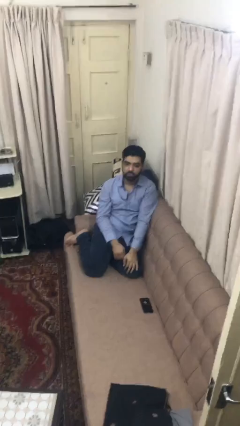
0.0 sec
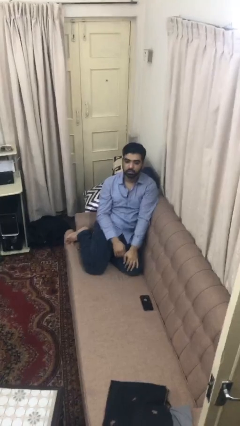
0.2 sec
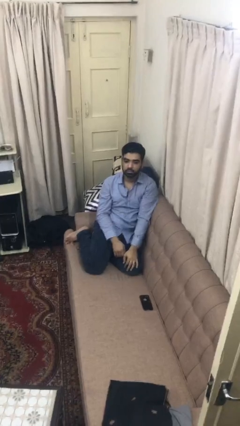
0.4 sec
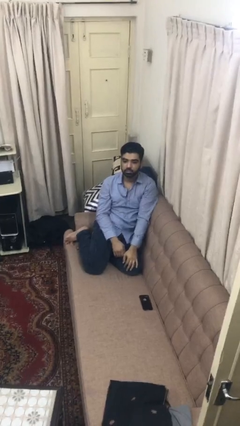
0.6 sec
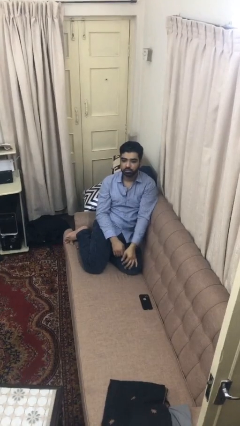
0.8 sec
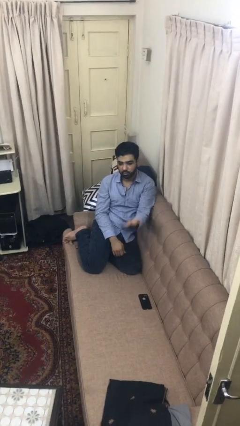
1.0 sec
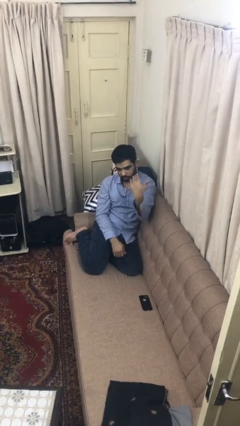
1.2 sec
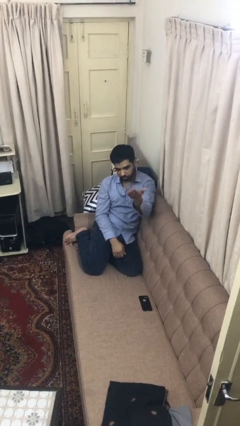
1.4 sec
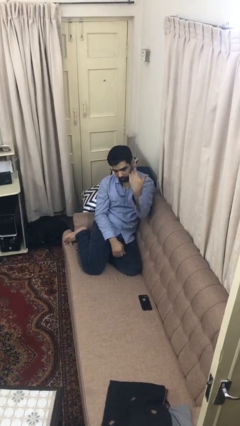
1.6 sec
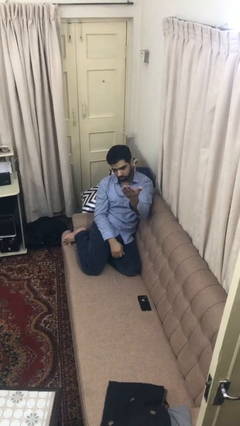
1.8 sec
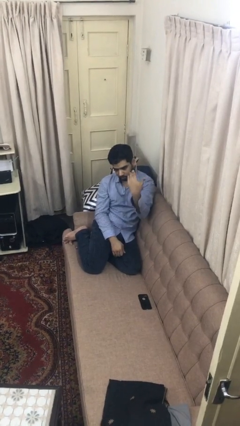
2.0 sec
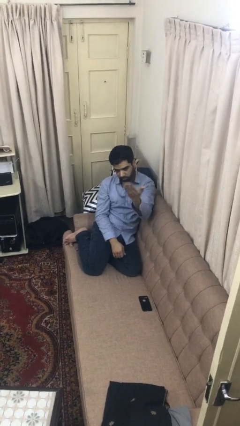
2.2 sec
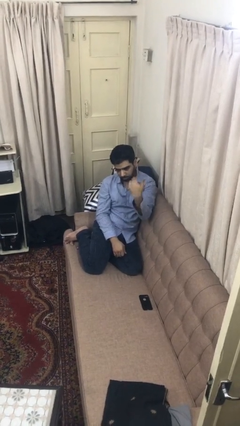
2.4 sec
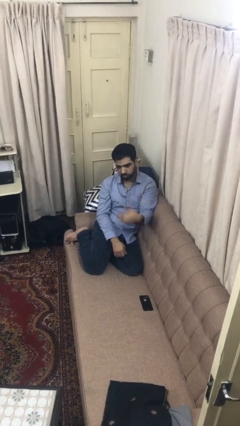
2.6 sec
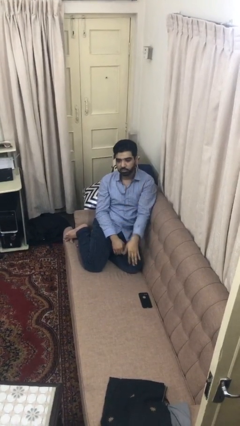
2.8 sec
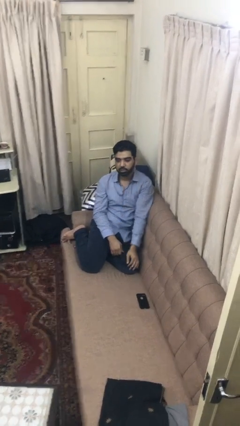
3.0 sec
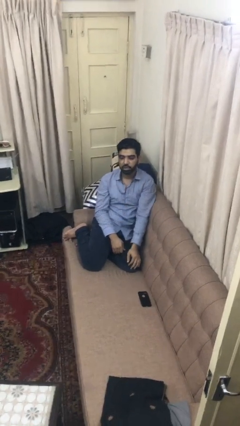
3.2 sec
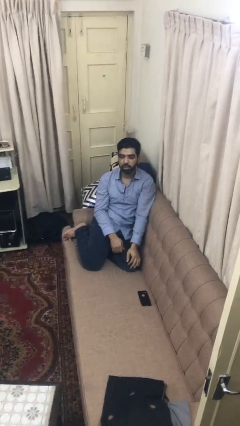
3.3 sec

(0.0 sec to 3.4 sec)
person gestures come here

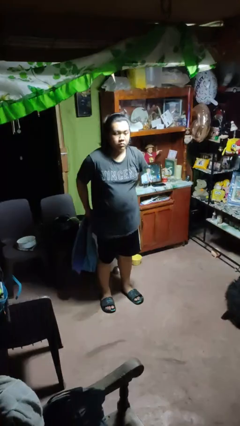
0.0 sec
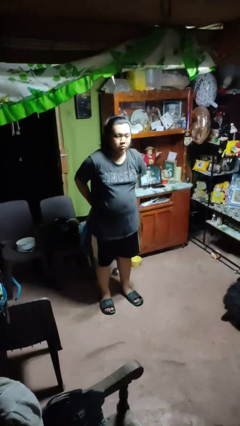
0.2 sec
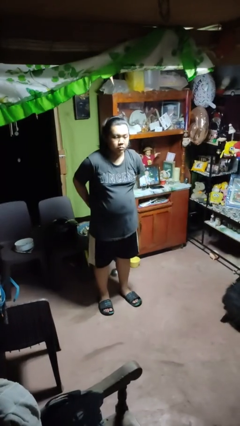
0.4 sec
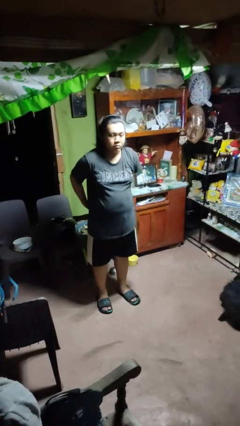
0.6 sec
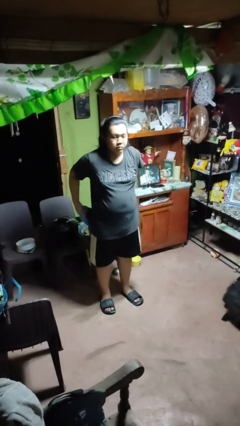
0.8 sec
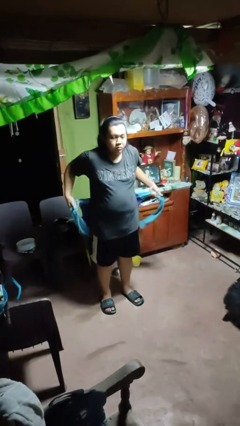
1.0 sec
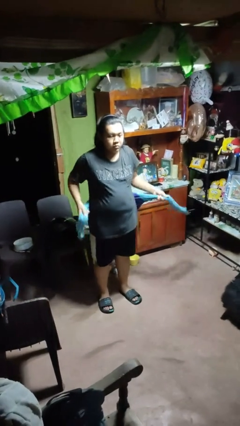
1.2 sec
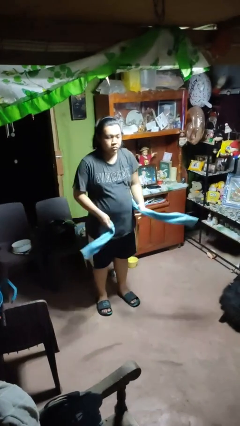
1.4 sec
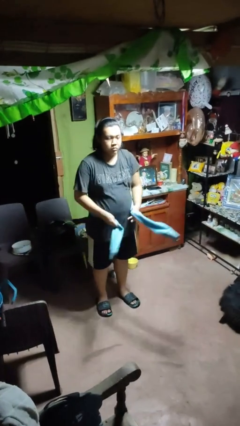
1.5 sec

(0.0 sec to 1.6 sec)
person ties jacket around waist

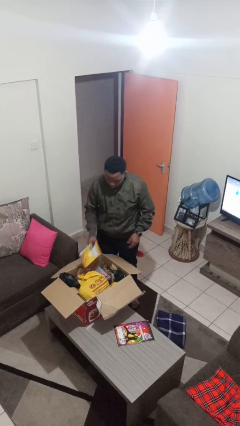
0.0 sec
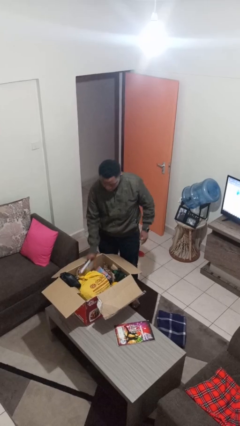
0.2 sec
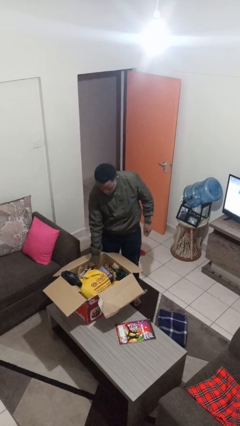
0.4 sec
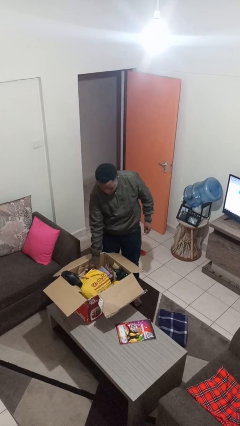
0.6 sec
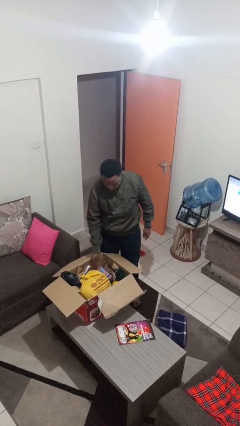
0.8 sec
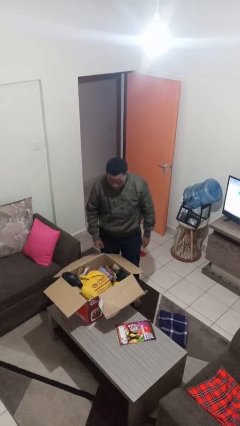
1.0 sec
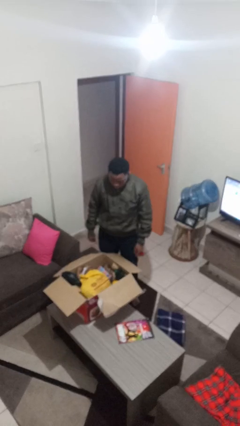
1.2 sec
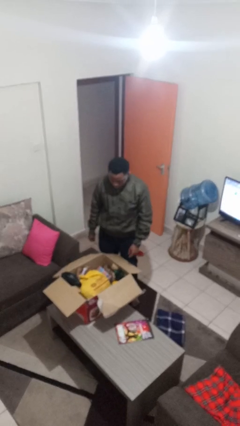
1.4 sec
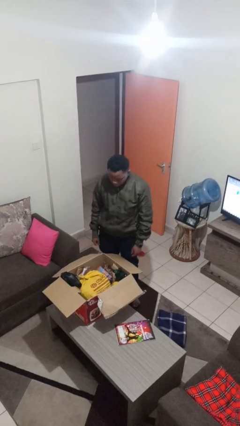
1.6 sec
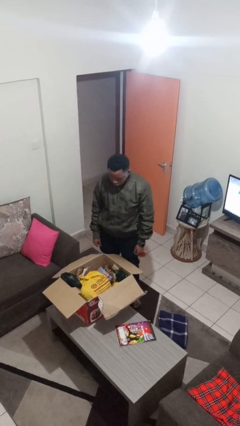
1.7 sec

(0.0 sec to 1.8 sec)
person puts object into box

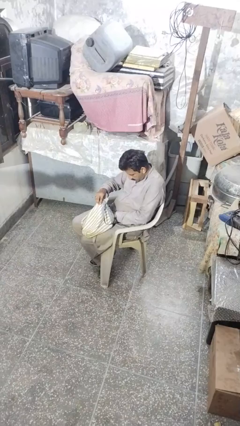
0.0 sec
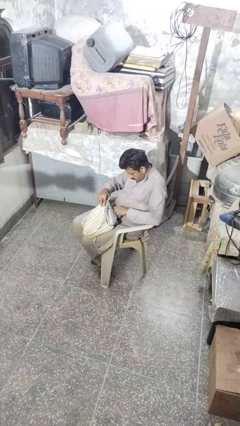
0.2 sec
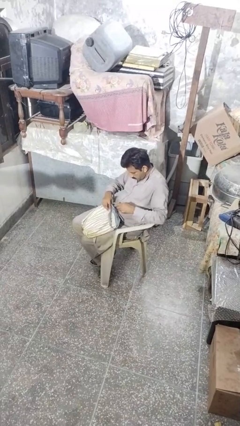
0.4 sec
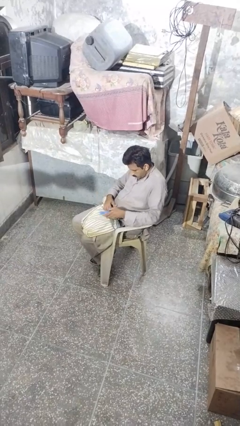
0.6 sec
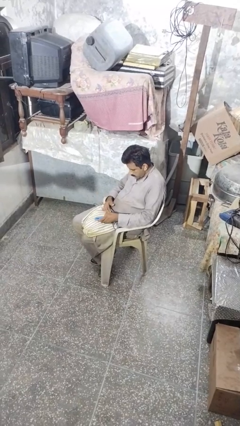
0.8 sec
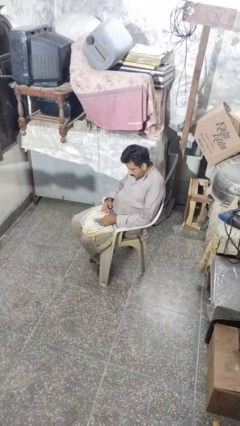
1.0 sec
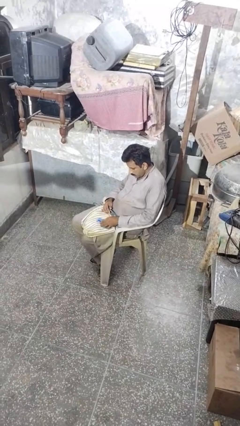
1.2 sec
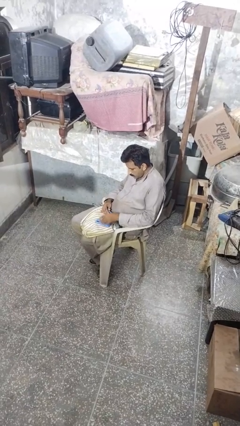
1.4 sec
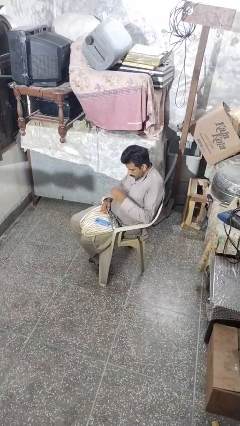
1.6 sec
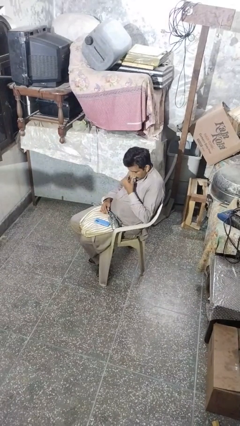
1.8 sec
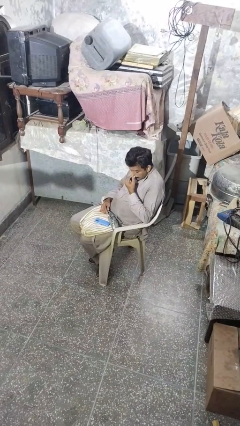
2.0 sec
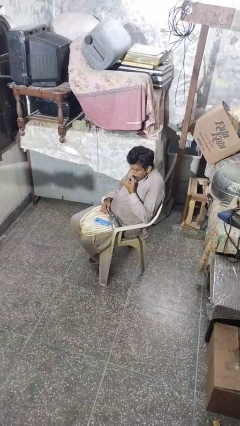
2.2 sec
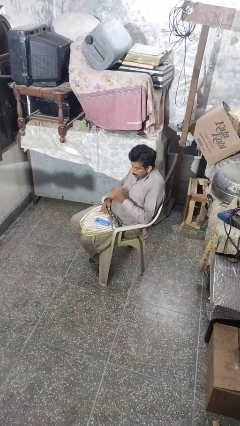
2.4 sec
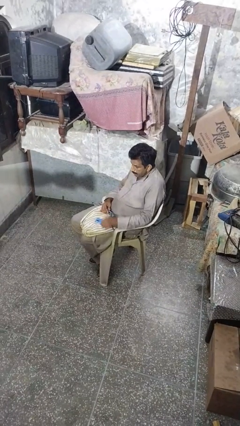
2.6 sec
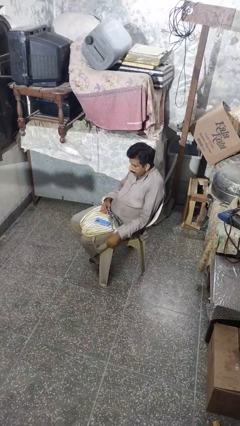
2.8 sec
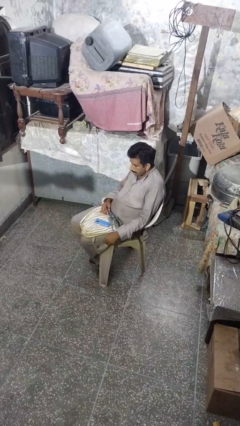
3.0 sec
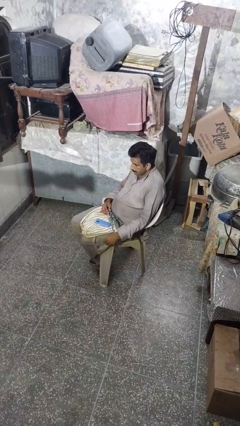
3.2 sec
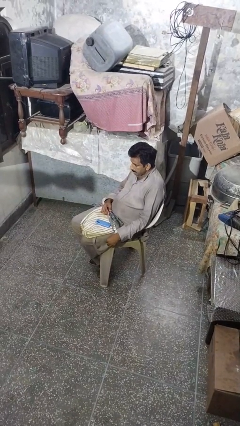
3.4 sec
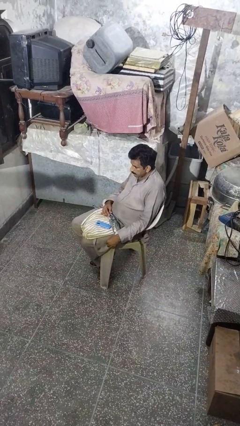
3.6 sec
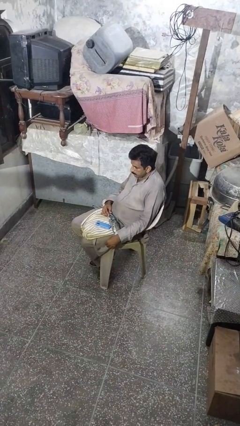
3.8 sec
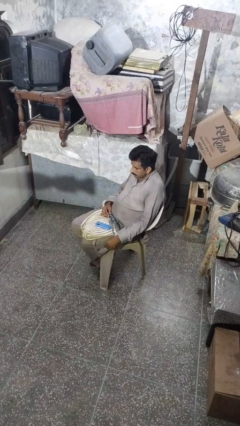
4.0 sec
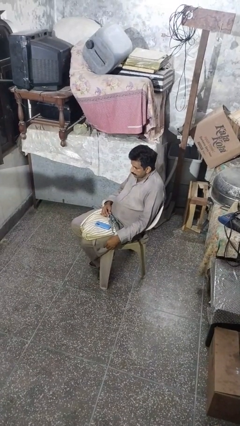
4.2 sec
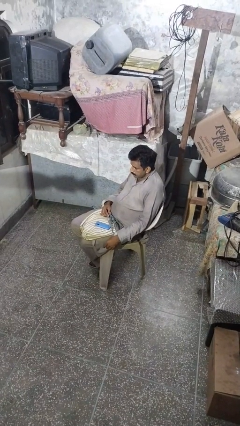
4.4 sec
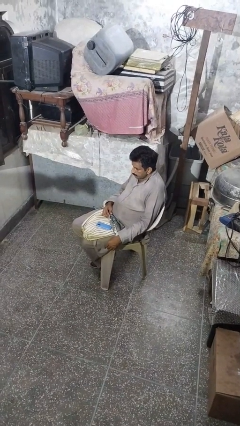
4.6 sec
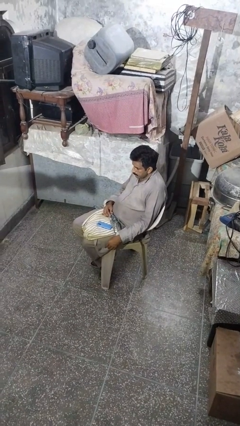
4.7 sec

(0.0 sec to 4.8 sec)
person takes object from purse

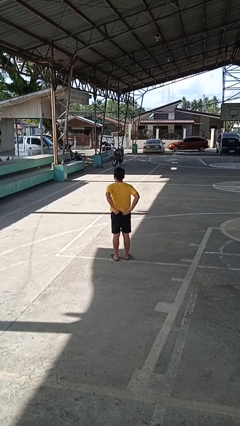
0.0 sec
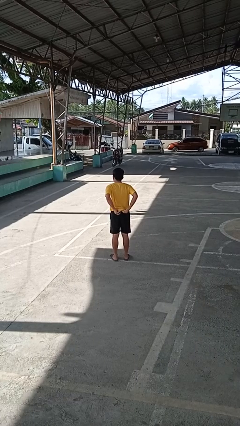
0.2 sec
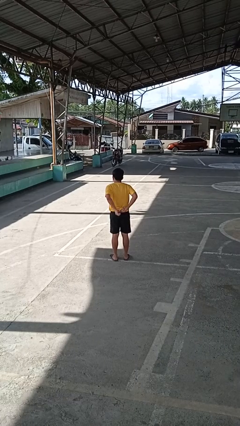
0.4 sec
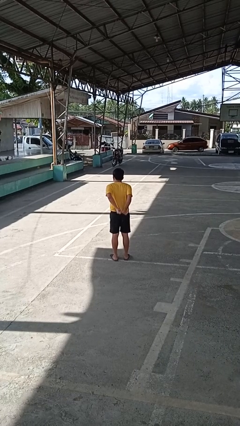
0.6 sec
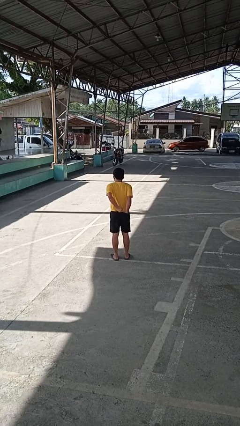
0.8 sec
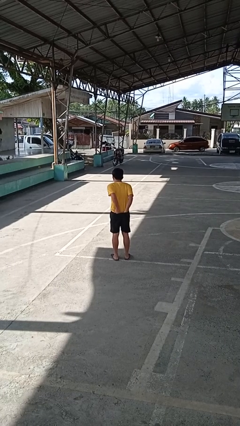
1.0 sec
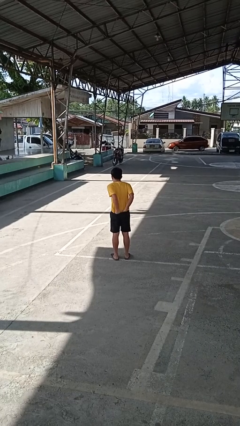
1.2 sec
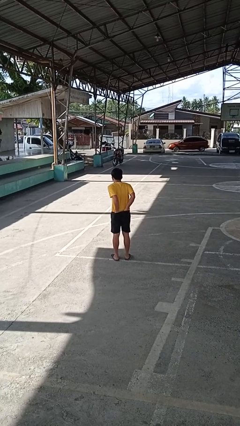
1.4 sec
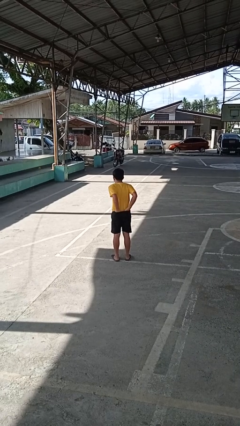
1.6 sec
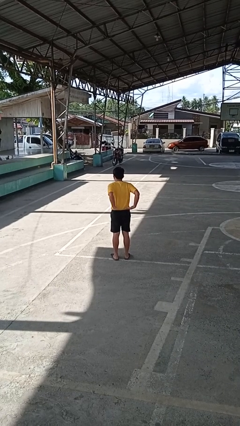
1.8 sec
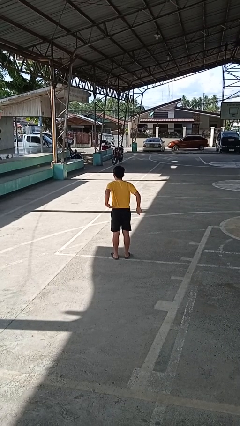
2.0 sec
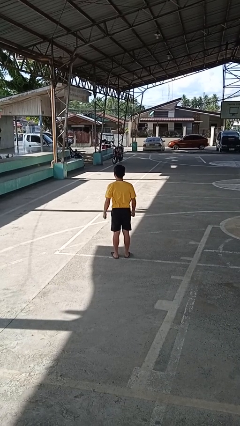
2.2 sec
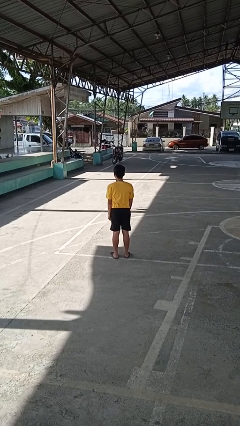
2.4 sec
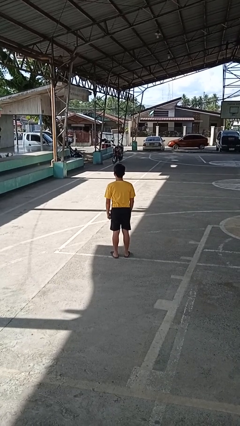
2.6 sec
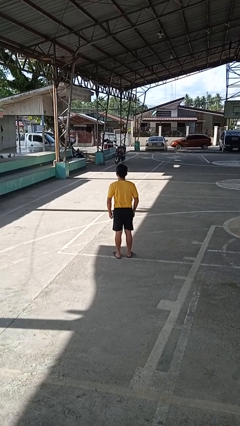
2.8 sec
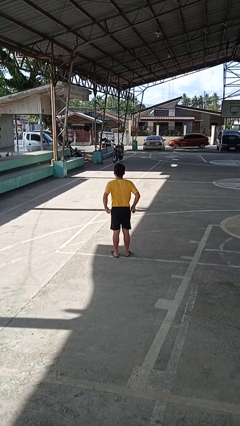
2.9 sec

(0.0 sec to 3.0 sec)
person tucks in shirt

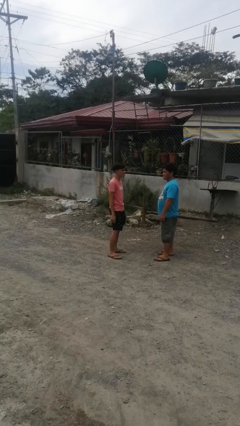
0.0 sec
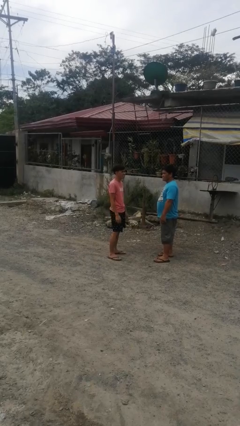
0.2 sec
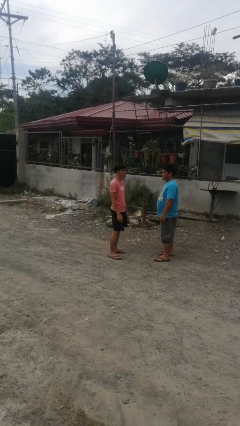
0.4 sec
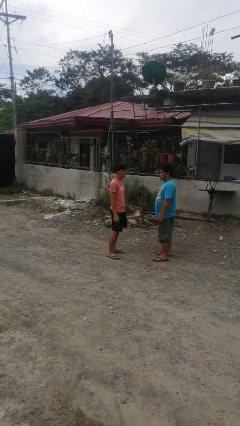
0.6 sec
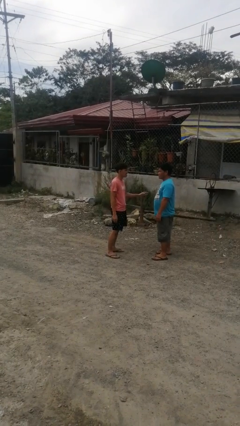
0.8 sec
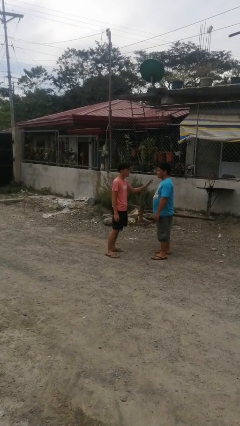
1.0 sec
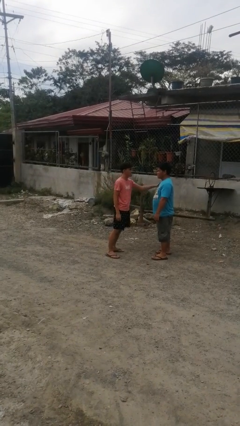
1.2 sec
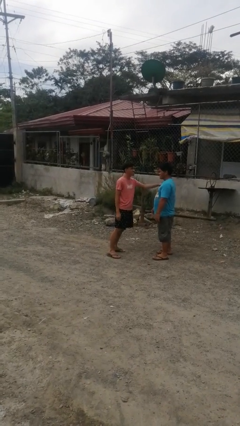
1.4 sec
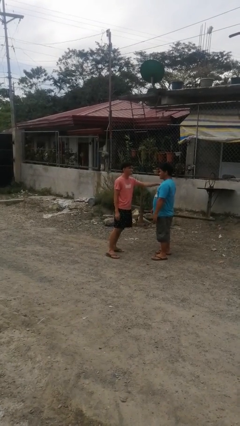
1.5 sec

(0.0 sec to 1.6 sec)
person shoves person

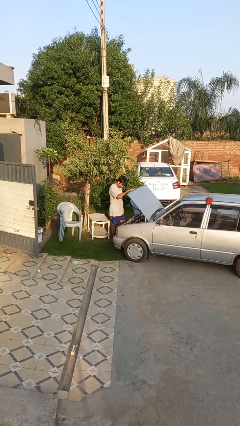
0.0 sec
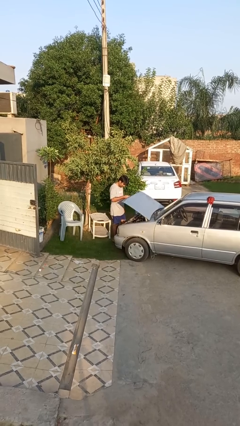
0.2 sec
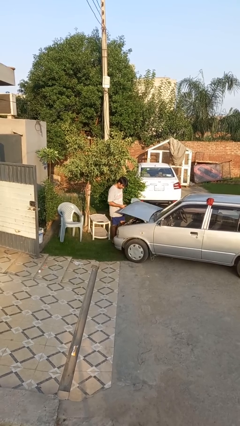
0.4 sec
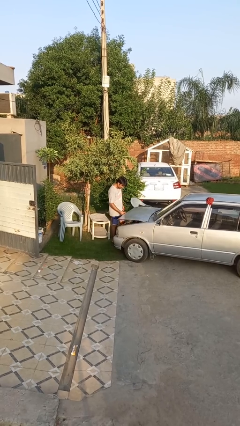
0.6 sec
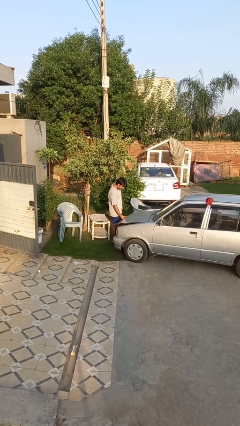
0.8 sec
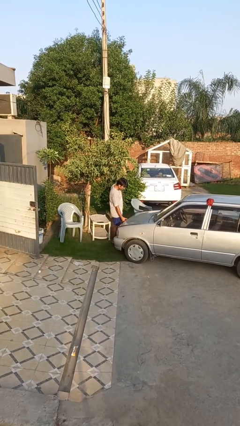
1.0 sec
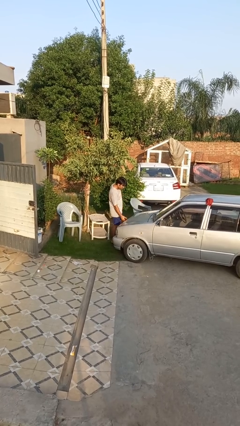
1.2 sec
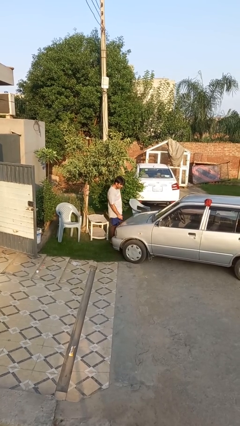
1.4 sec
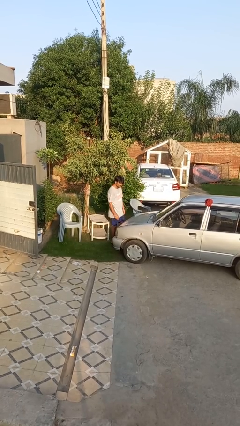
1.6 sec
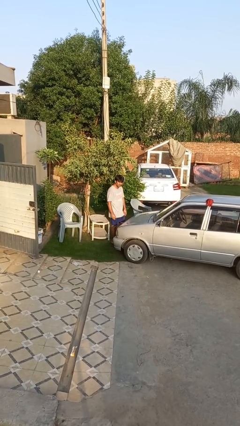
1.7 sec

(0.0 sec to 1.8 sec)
person closes car hood
